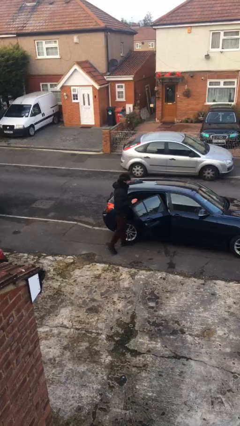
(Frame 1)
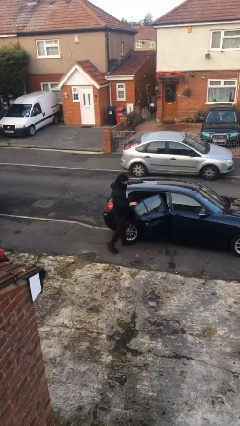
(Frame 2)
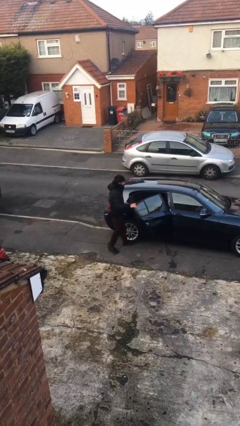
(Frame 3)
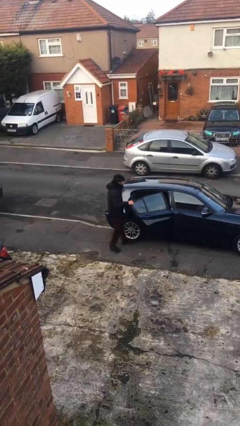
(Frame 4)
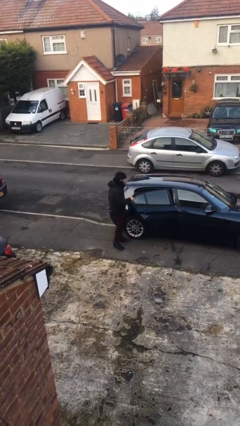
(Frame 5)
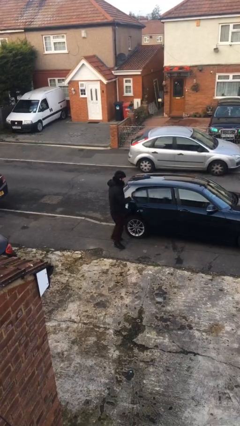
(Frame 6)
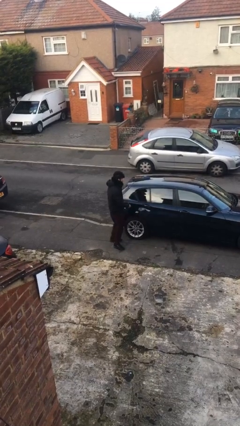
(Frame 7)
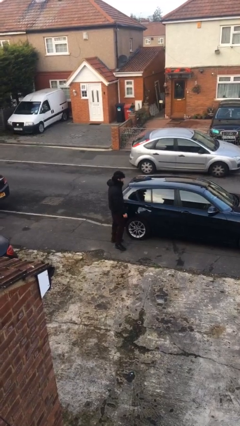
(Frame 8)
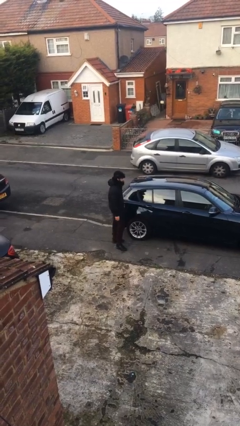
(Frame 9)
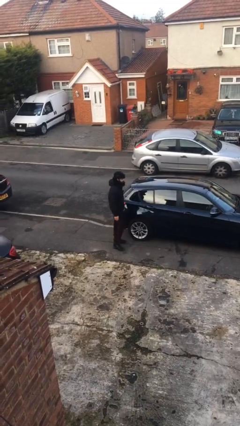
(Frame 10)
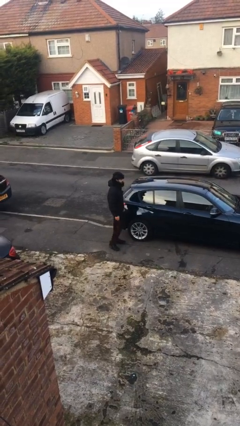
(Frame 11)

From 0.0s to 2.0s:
person closes car door

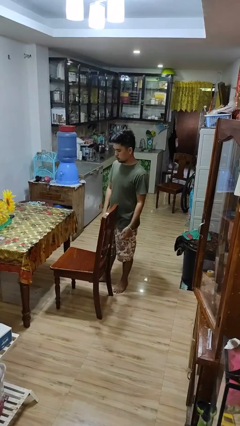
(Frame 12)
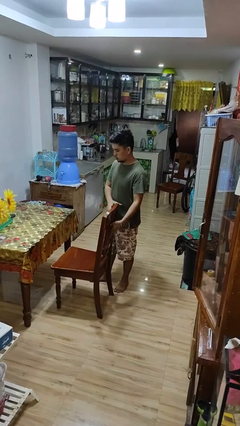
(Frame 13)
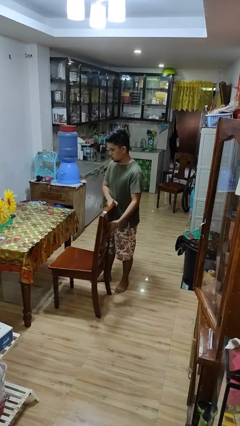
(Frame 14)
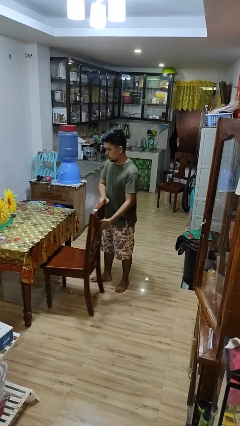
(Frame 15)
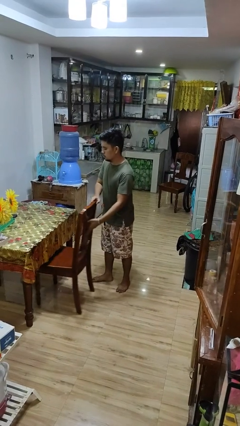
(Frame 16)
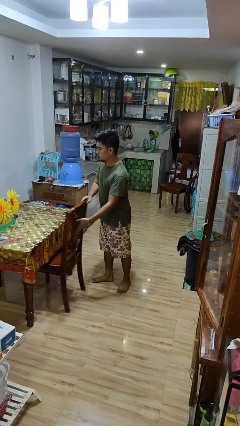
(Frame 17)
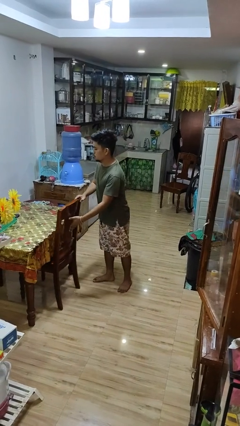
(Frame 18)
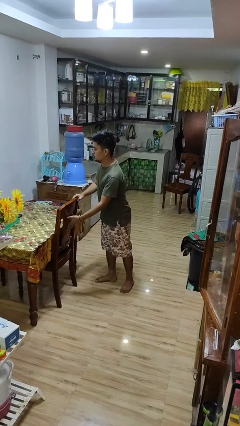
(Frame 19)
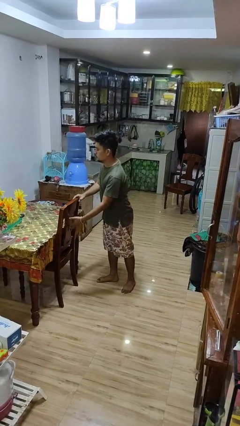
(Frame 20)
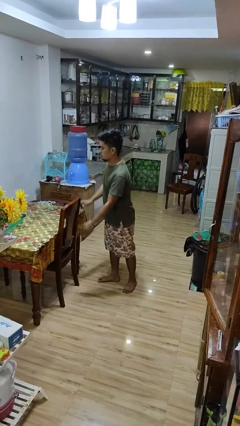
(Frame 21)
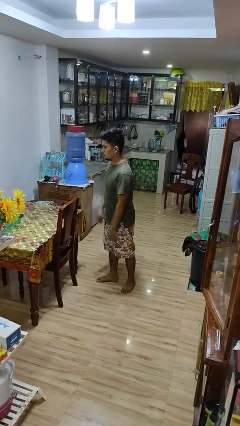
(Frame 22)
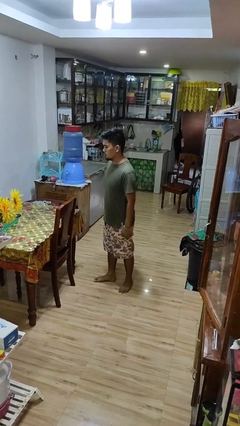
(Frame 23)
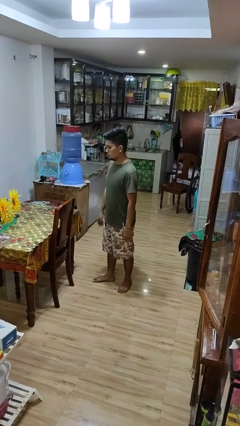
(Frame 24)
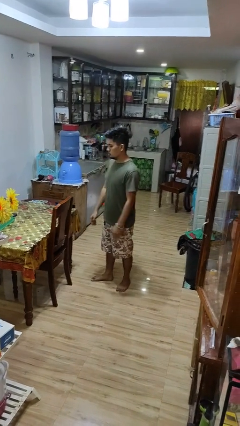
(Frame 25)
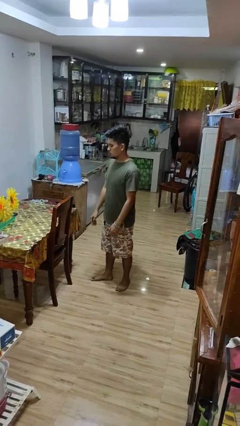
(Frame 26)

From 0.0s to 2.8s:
person pushes in chair

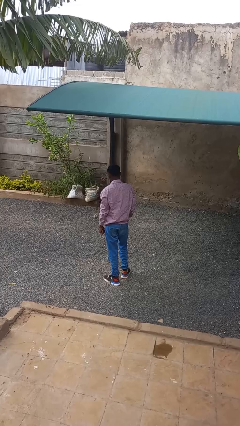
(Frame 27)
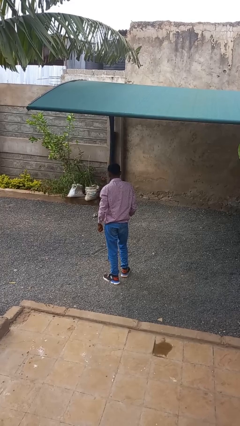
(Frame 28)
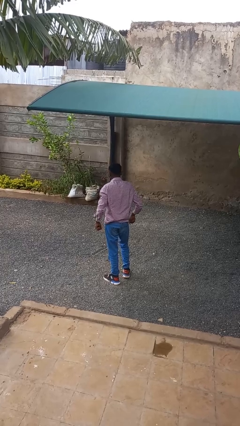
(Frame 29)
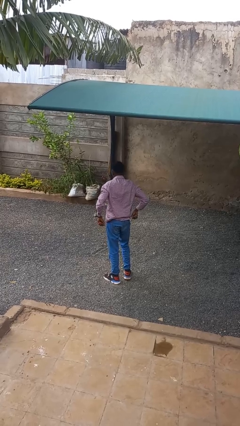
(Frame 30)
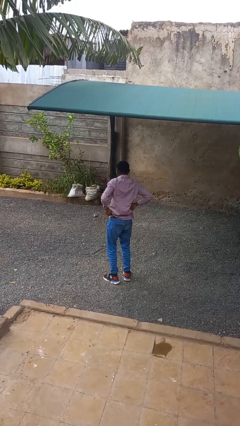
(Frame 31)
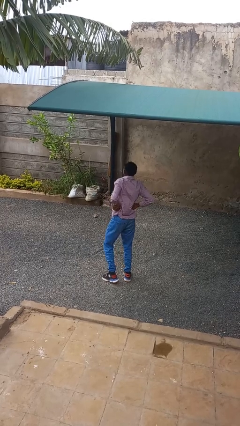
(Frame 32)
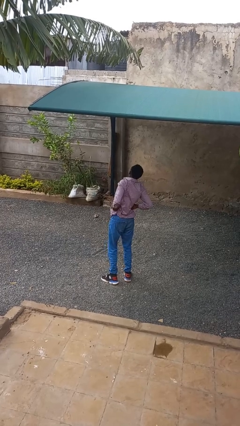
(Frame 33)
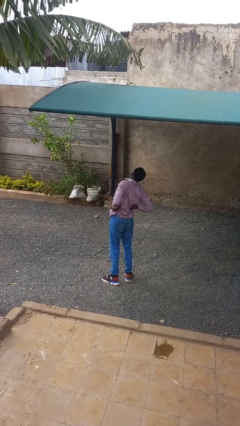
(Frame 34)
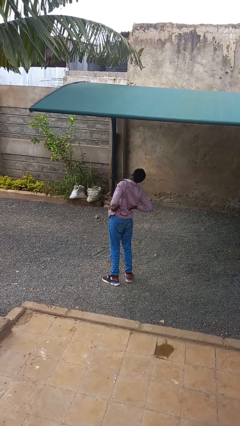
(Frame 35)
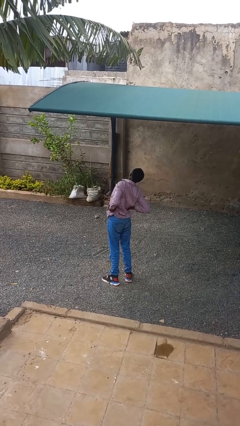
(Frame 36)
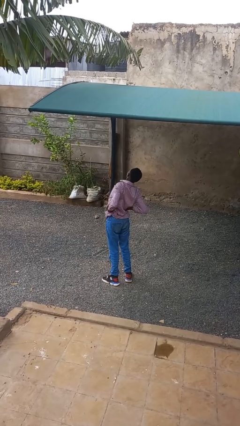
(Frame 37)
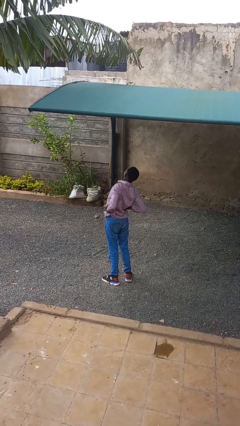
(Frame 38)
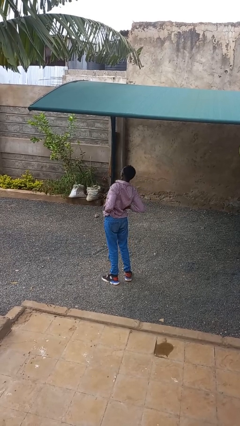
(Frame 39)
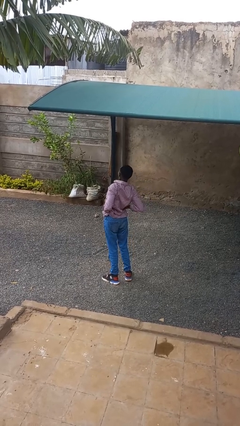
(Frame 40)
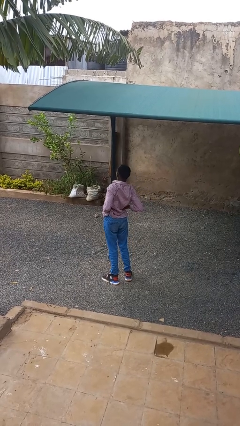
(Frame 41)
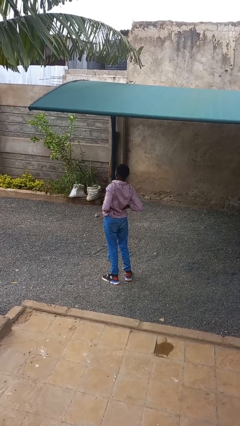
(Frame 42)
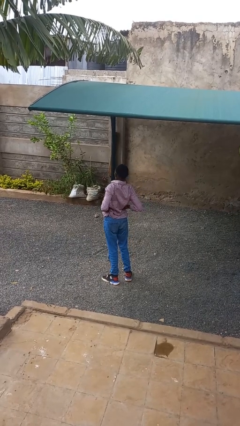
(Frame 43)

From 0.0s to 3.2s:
person stretches back

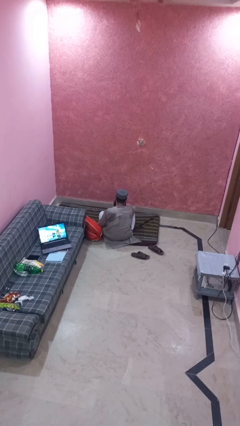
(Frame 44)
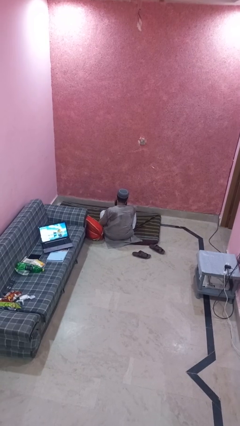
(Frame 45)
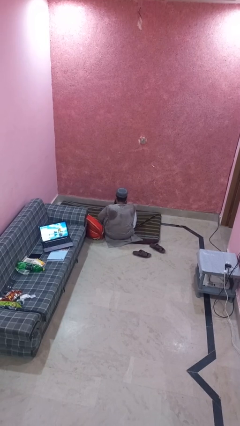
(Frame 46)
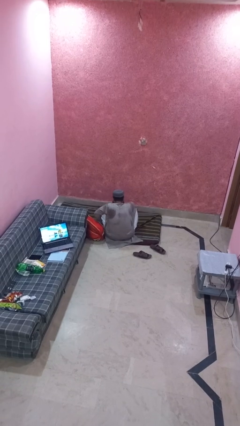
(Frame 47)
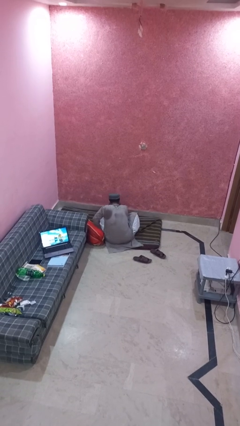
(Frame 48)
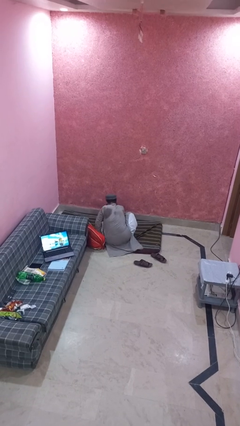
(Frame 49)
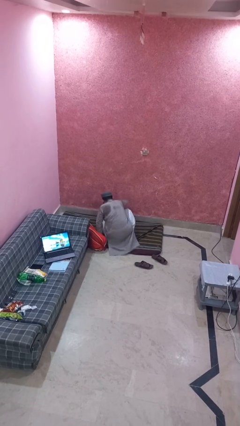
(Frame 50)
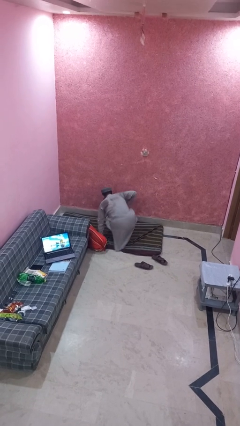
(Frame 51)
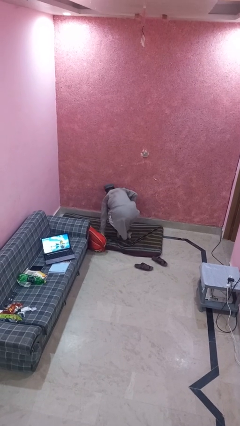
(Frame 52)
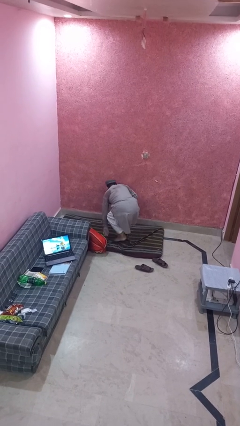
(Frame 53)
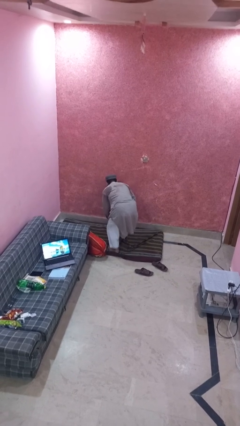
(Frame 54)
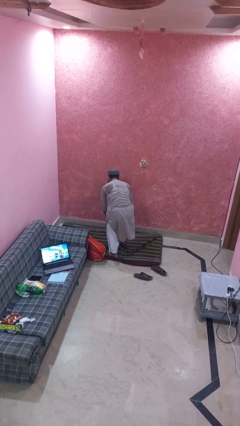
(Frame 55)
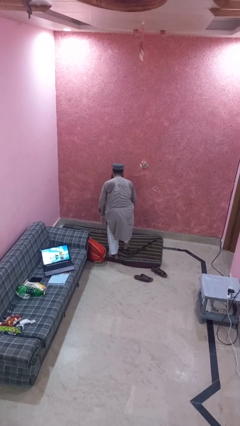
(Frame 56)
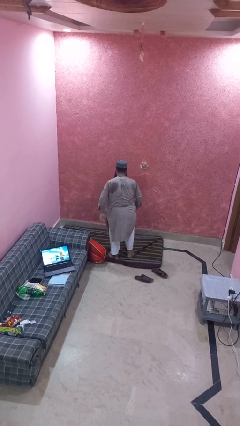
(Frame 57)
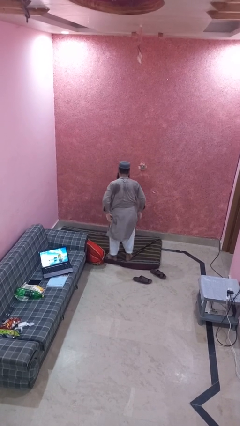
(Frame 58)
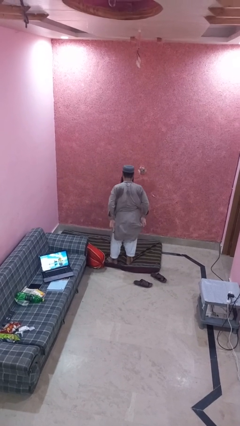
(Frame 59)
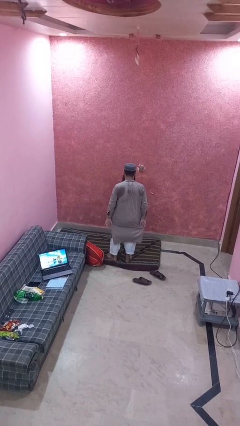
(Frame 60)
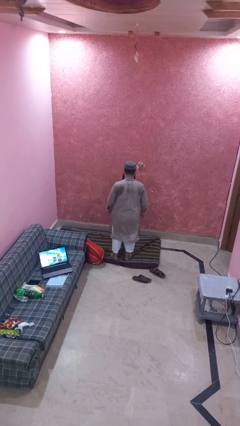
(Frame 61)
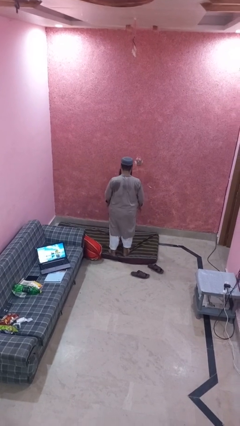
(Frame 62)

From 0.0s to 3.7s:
person stands up from floor

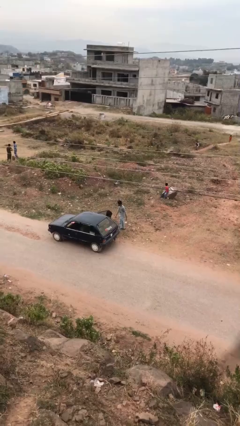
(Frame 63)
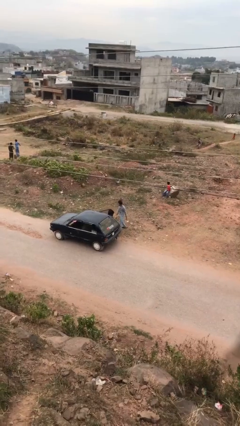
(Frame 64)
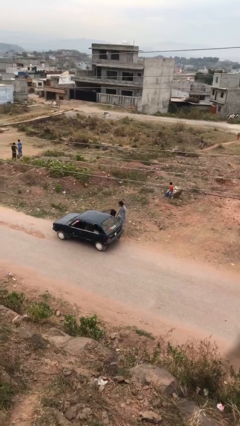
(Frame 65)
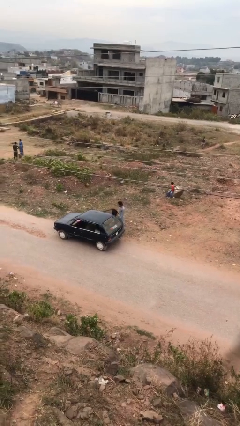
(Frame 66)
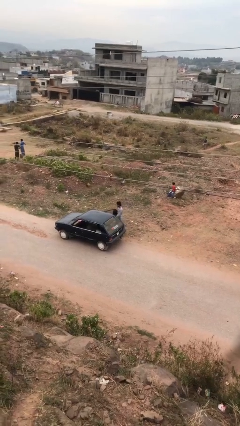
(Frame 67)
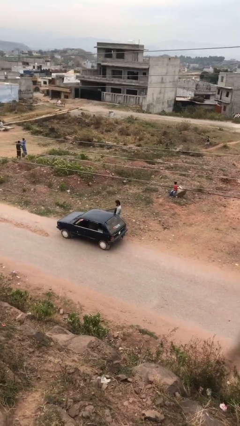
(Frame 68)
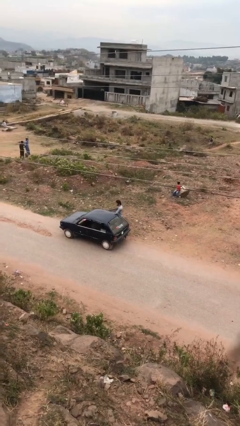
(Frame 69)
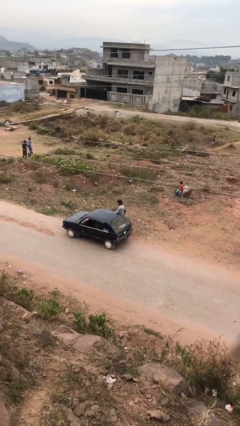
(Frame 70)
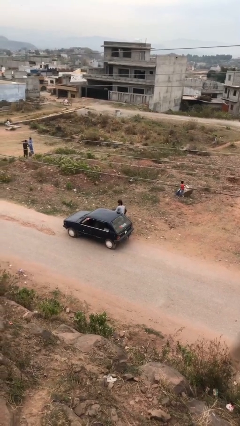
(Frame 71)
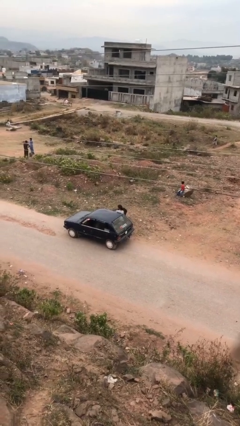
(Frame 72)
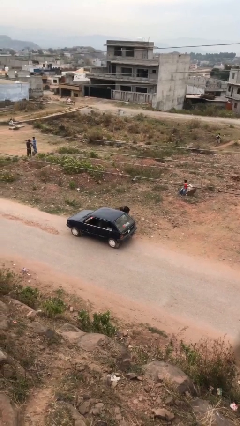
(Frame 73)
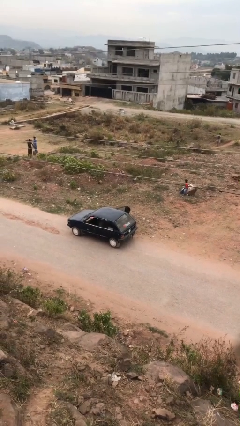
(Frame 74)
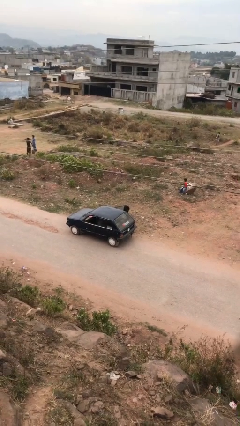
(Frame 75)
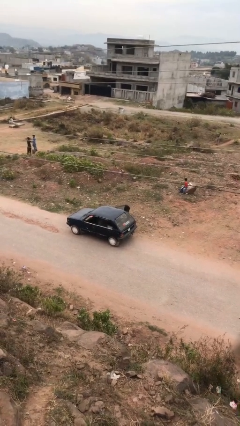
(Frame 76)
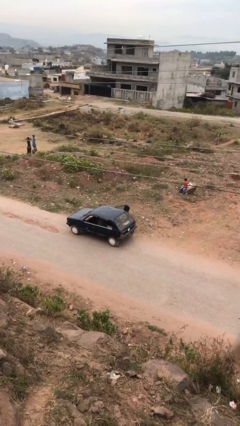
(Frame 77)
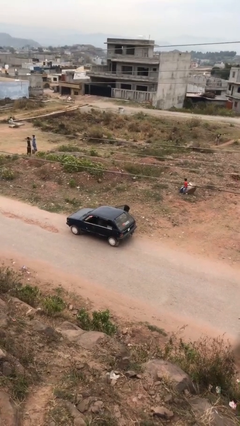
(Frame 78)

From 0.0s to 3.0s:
person enters car

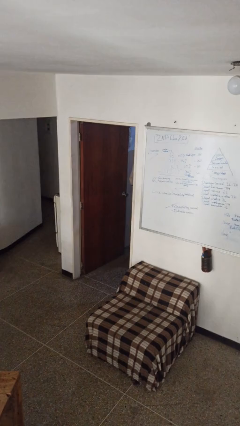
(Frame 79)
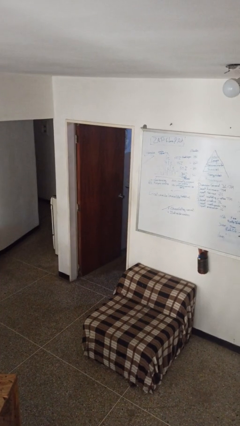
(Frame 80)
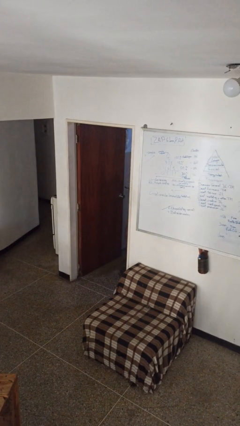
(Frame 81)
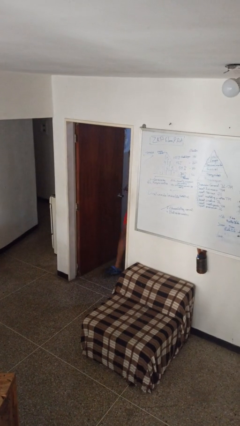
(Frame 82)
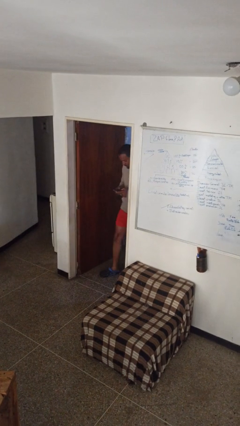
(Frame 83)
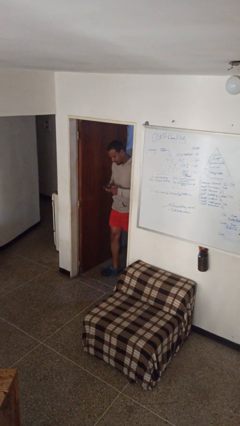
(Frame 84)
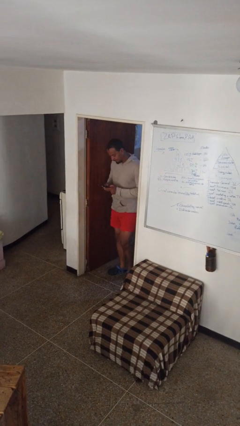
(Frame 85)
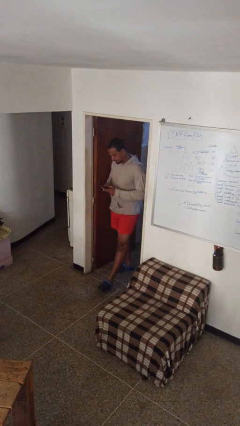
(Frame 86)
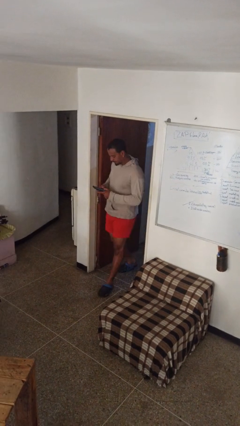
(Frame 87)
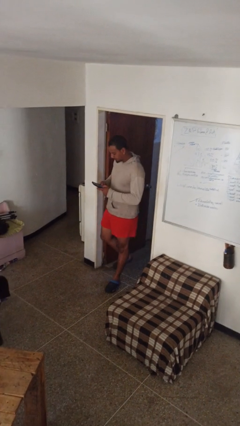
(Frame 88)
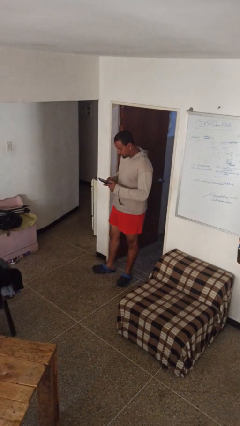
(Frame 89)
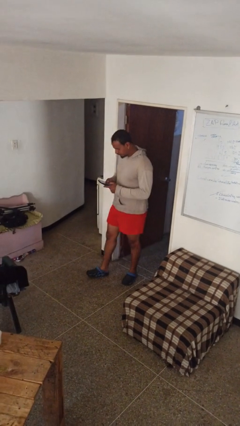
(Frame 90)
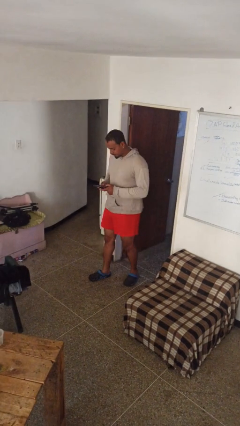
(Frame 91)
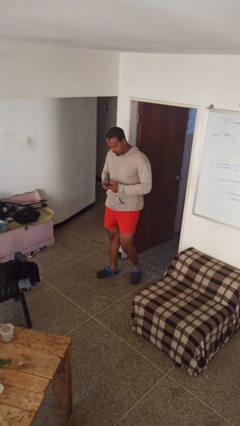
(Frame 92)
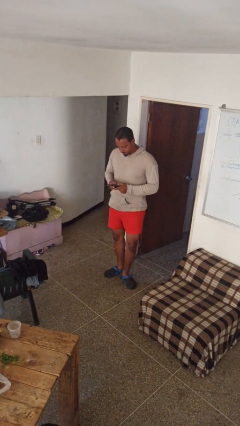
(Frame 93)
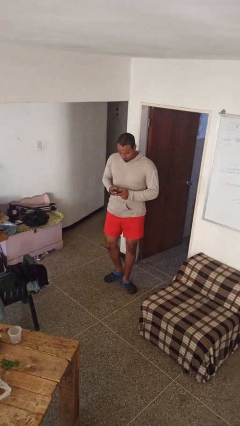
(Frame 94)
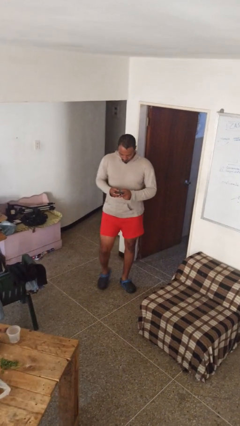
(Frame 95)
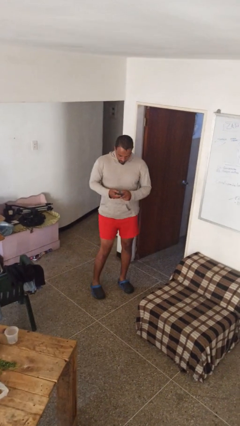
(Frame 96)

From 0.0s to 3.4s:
person enters scene through structure
